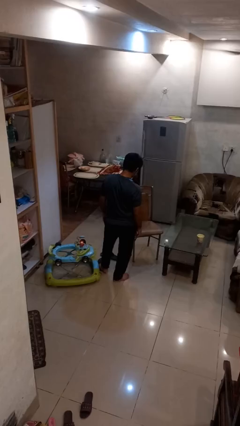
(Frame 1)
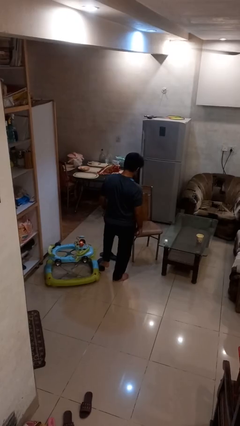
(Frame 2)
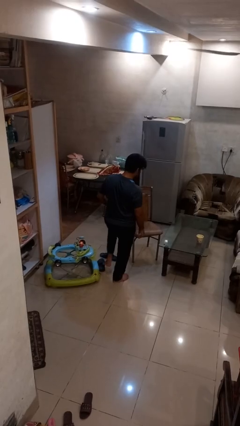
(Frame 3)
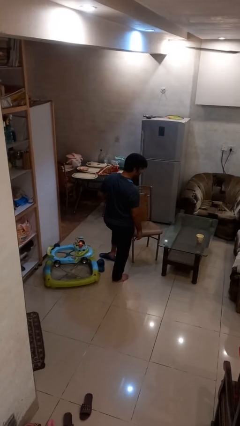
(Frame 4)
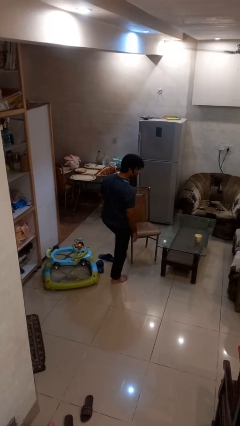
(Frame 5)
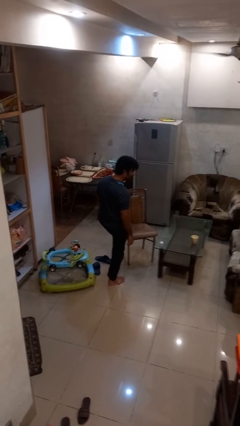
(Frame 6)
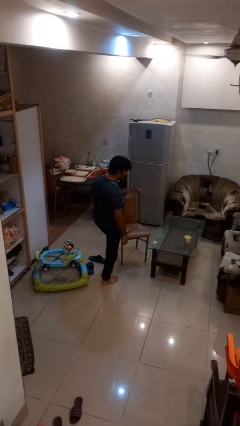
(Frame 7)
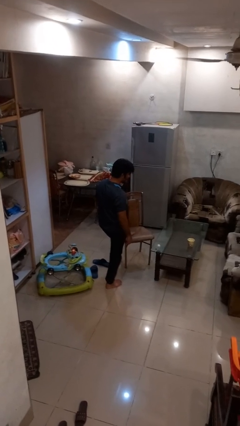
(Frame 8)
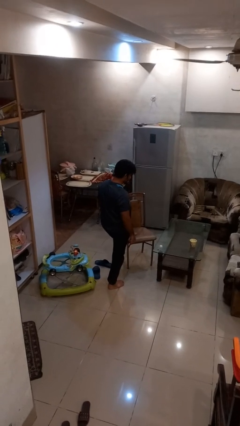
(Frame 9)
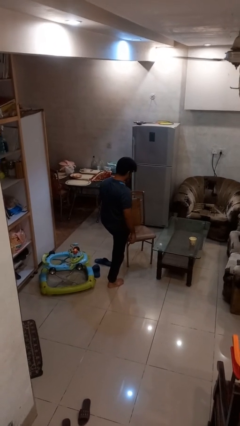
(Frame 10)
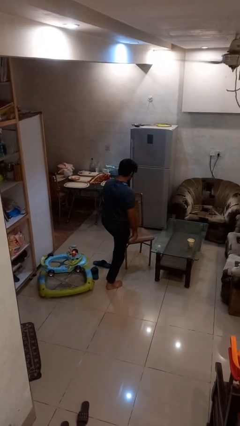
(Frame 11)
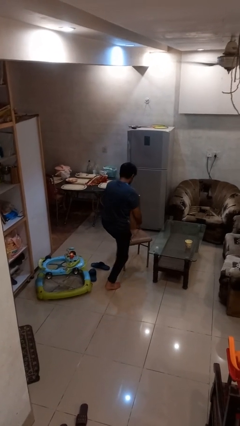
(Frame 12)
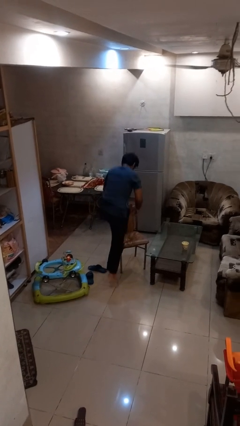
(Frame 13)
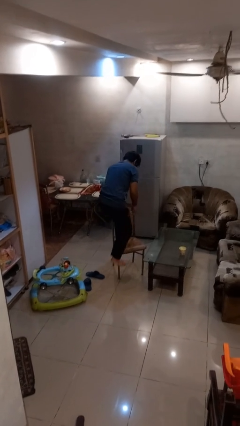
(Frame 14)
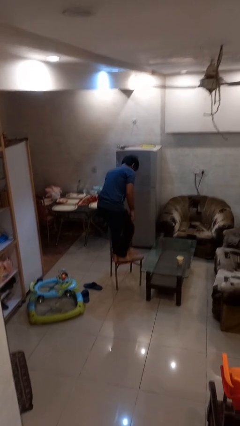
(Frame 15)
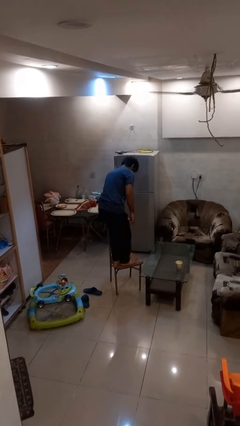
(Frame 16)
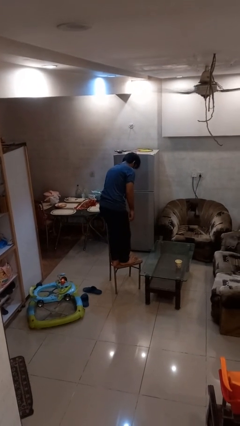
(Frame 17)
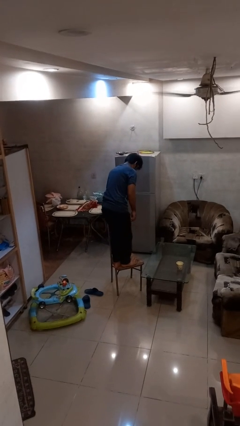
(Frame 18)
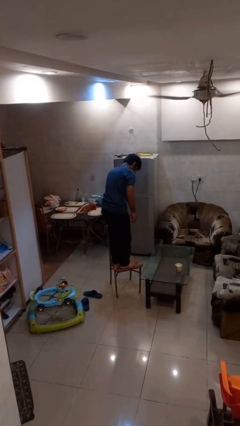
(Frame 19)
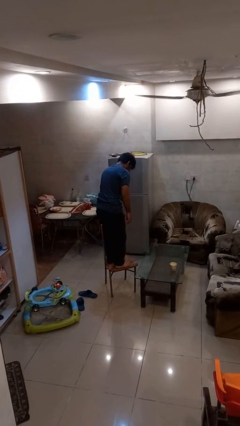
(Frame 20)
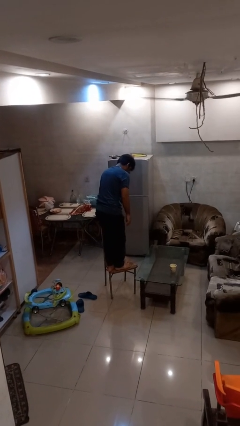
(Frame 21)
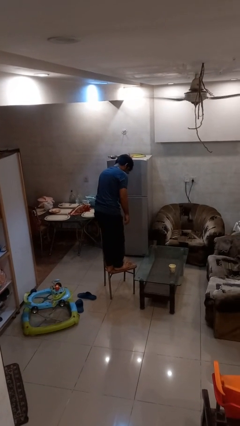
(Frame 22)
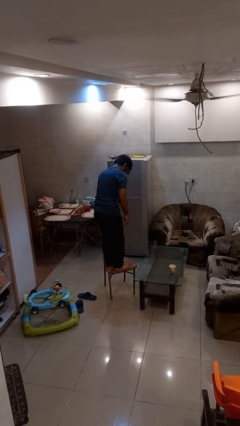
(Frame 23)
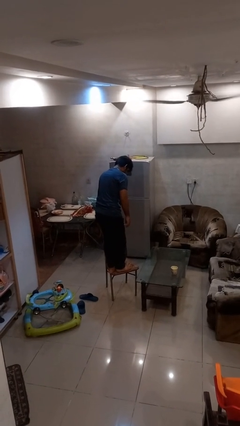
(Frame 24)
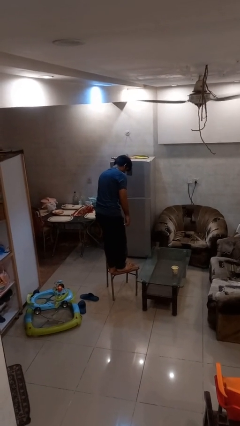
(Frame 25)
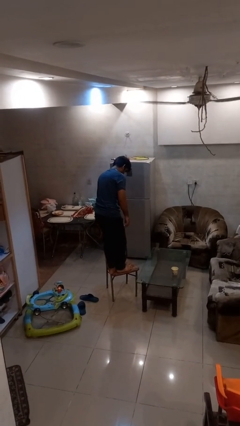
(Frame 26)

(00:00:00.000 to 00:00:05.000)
person climbs on chair

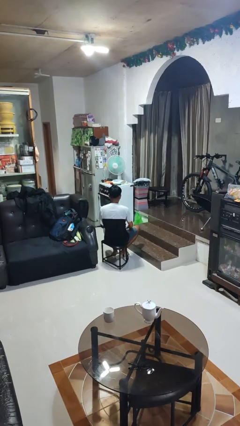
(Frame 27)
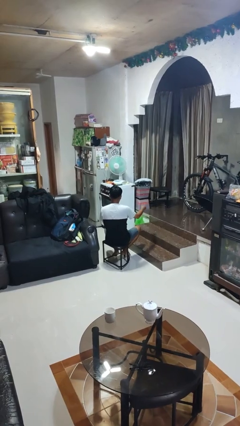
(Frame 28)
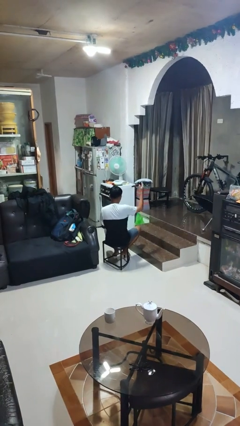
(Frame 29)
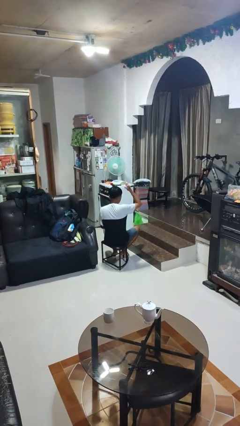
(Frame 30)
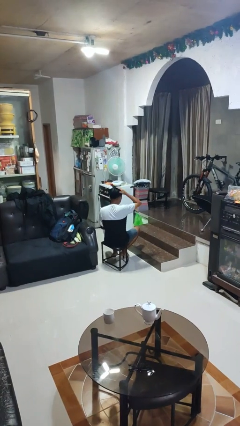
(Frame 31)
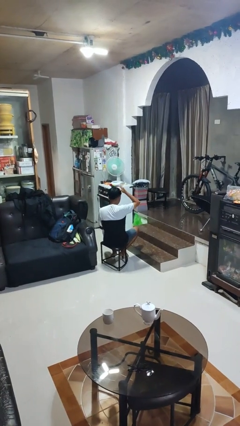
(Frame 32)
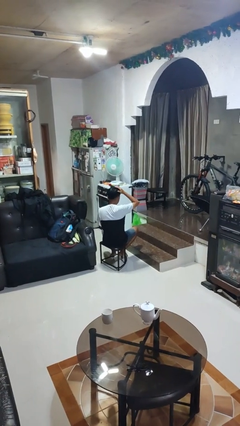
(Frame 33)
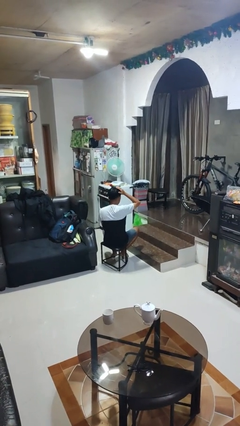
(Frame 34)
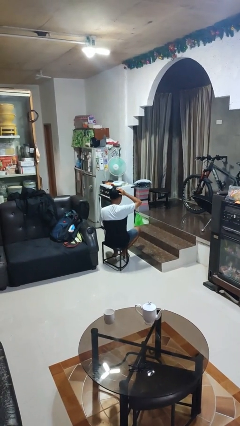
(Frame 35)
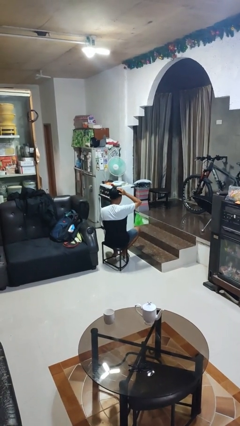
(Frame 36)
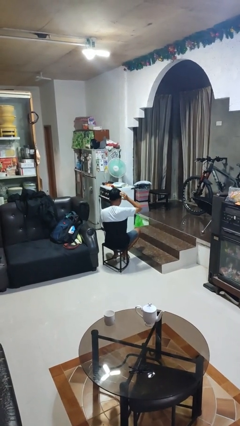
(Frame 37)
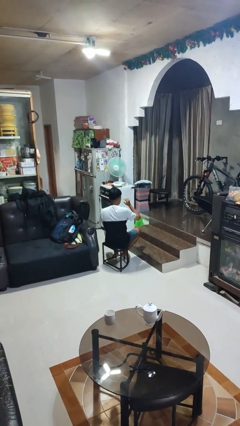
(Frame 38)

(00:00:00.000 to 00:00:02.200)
person pats head

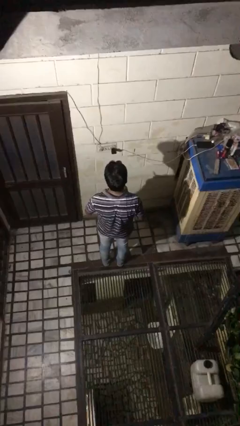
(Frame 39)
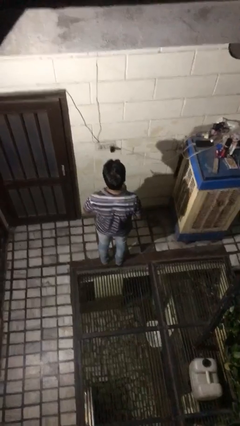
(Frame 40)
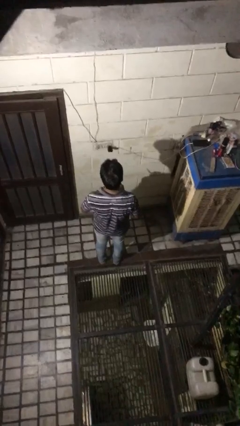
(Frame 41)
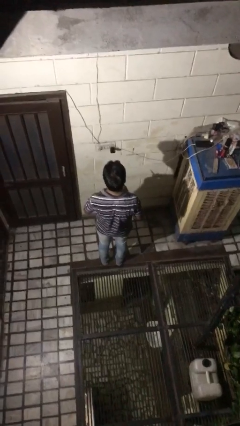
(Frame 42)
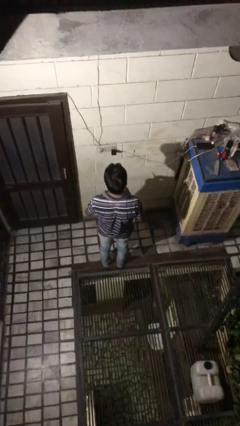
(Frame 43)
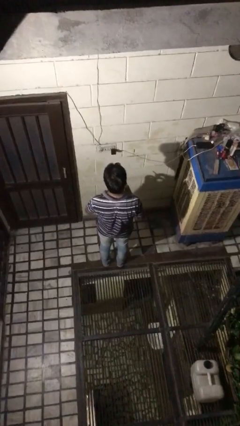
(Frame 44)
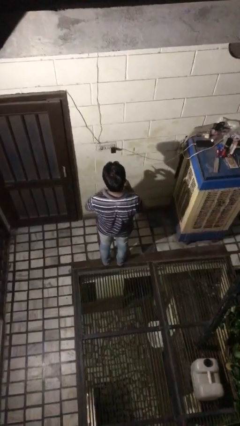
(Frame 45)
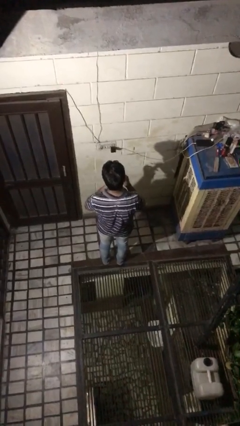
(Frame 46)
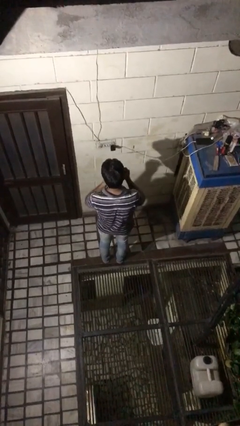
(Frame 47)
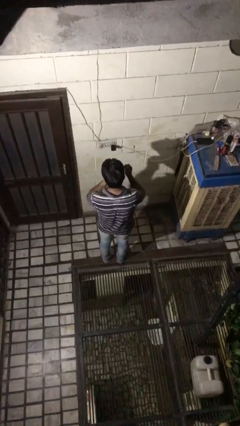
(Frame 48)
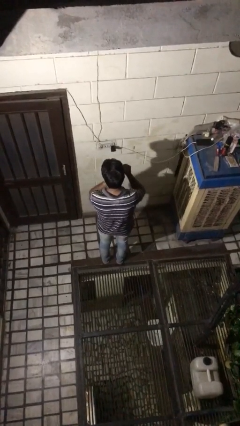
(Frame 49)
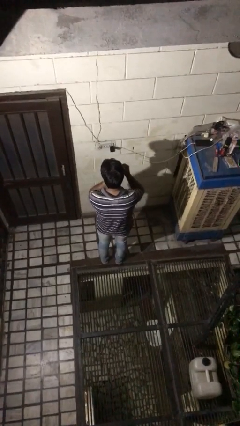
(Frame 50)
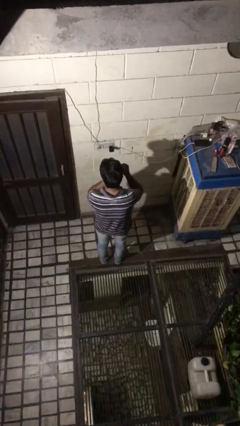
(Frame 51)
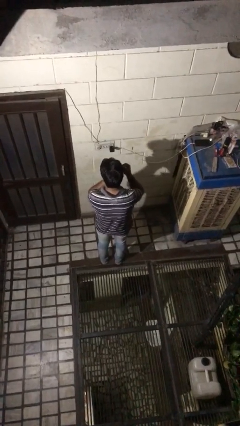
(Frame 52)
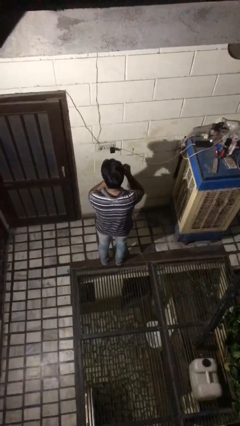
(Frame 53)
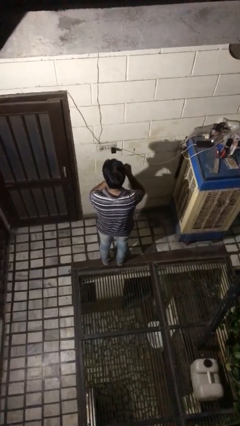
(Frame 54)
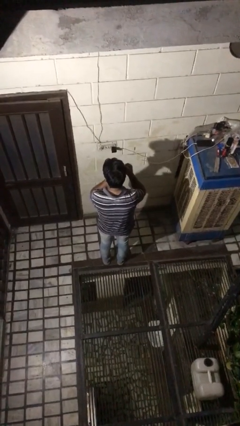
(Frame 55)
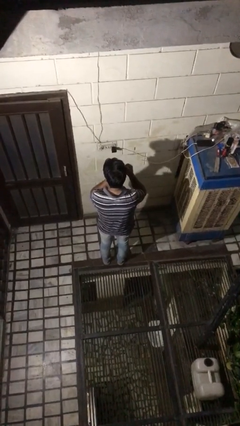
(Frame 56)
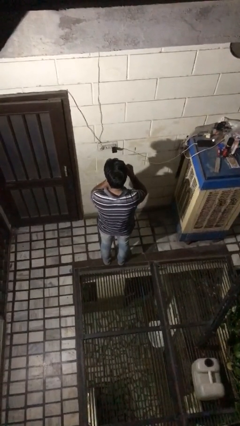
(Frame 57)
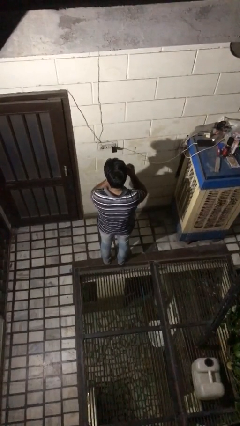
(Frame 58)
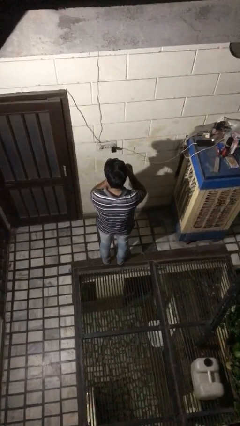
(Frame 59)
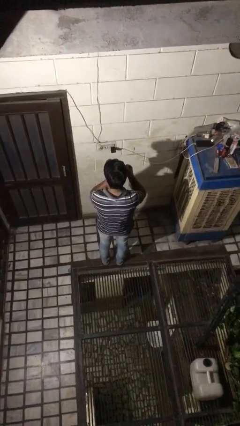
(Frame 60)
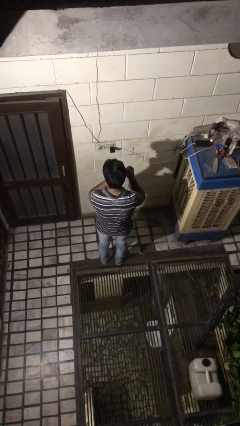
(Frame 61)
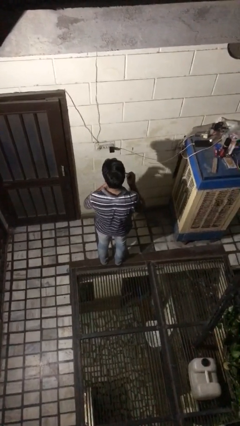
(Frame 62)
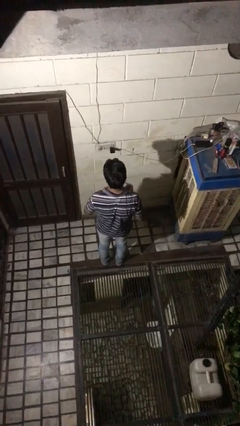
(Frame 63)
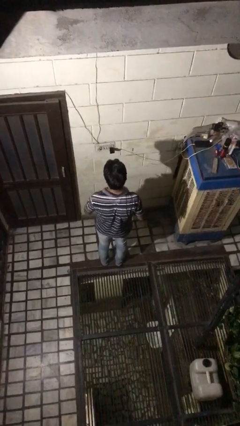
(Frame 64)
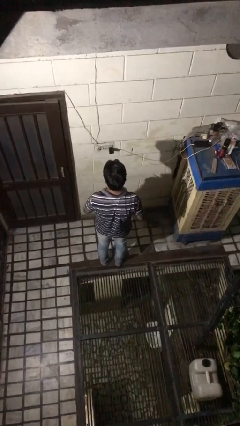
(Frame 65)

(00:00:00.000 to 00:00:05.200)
person applies eye makeup

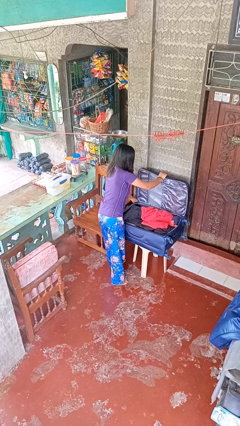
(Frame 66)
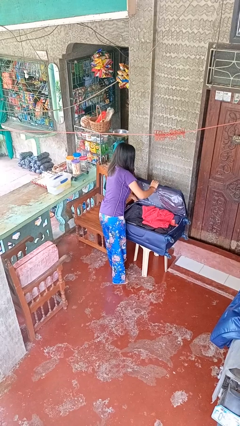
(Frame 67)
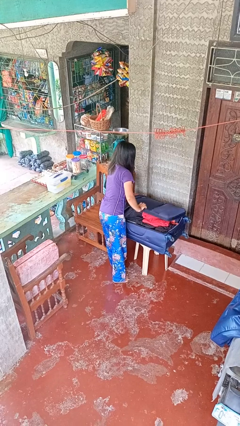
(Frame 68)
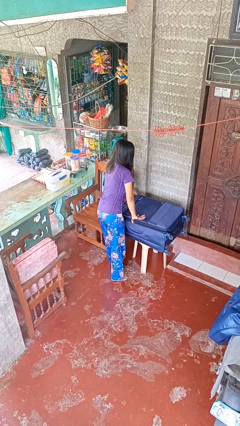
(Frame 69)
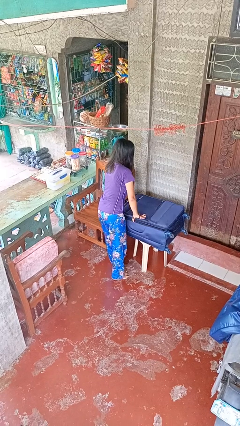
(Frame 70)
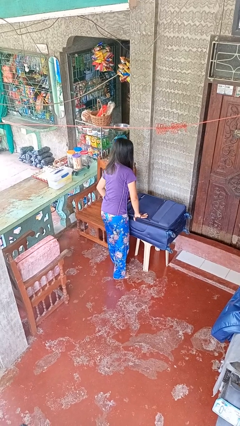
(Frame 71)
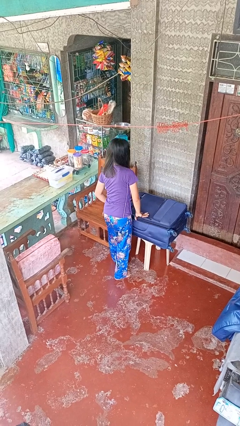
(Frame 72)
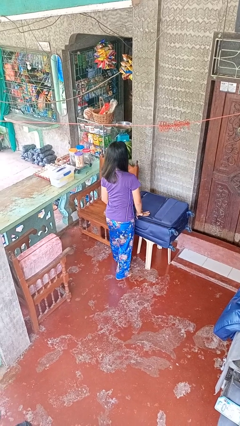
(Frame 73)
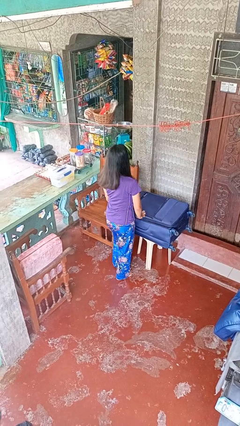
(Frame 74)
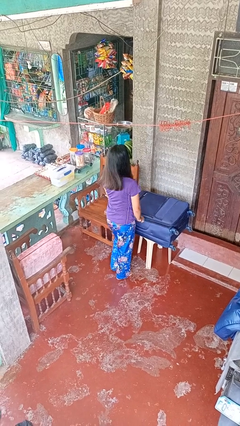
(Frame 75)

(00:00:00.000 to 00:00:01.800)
person closes suitcase

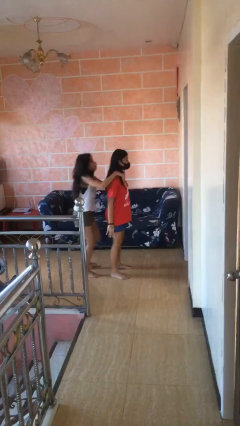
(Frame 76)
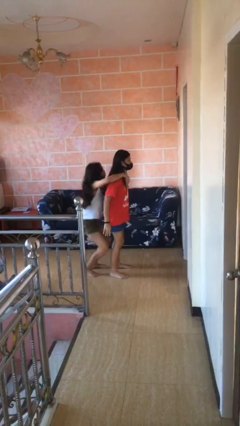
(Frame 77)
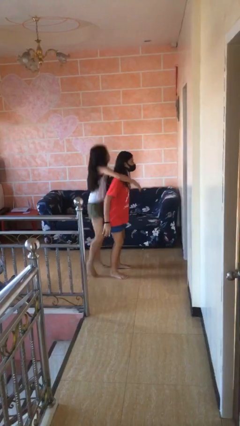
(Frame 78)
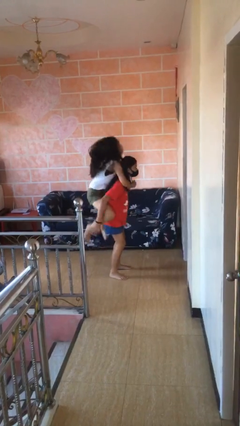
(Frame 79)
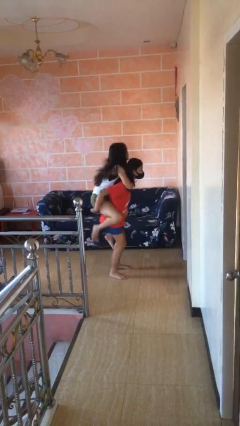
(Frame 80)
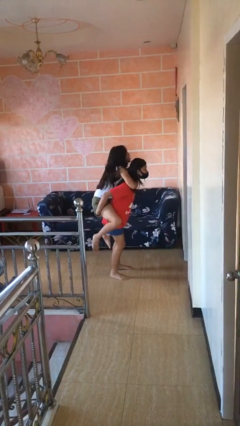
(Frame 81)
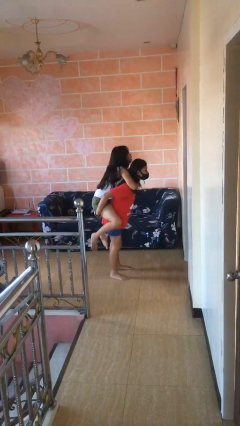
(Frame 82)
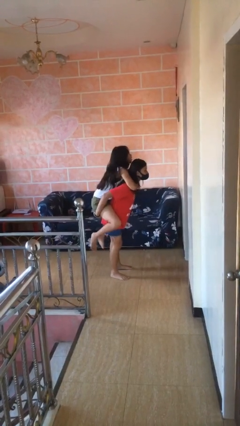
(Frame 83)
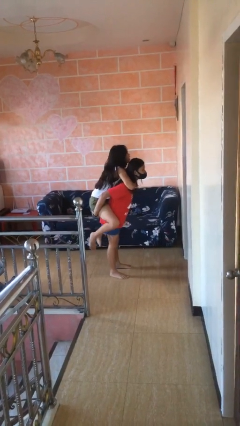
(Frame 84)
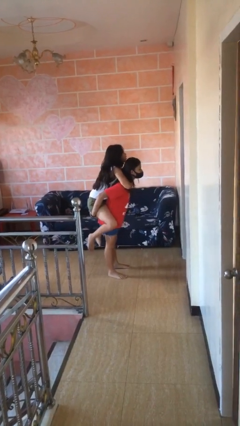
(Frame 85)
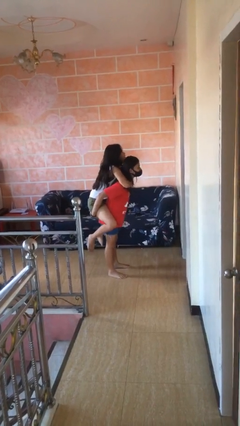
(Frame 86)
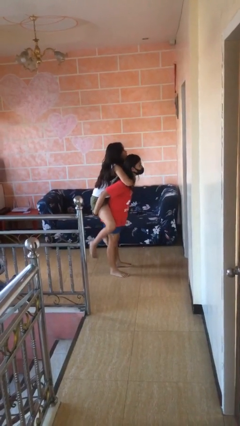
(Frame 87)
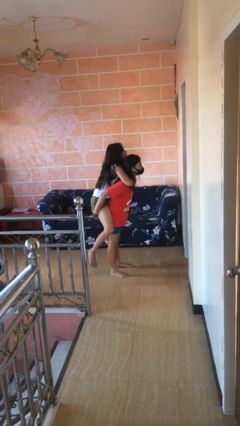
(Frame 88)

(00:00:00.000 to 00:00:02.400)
person carries person over shoulder

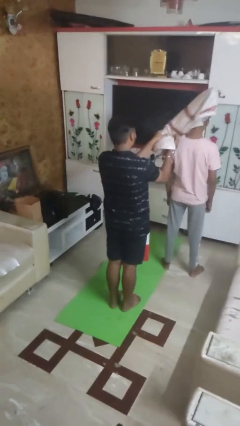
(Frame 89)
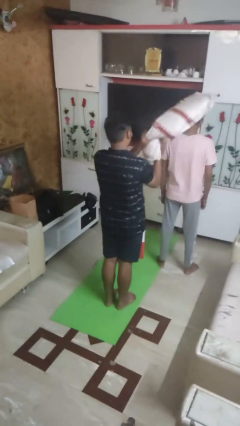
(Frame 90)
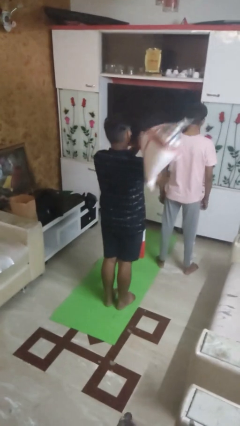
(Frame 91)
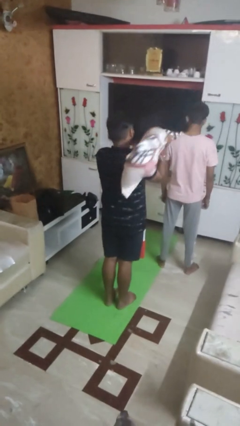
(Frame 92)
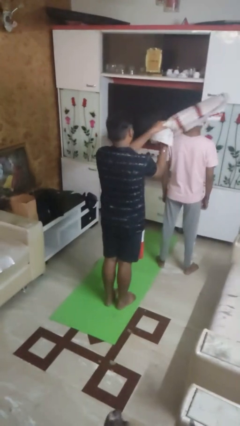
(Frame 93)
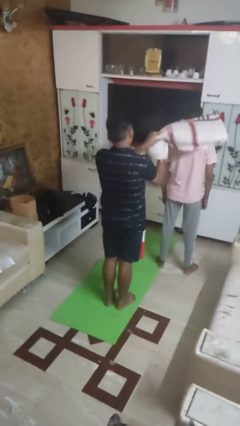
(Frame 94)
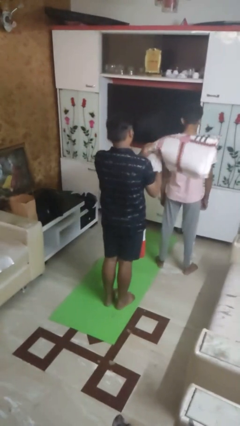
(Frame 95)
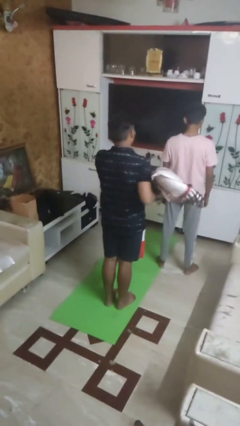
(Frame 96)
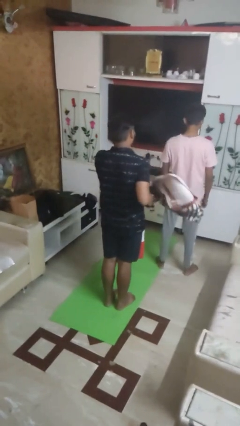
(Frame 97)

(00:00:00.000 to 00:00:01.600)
person hits person with pillow
